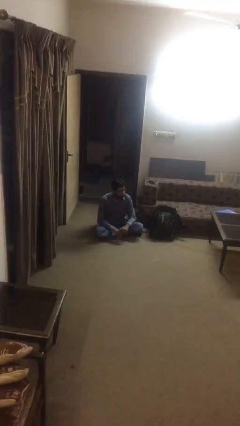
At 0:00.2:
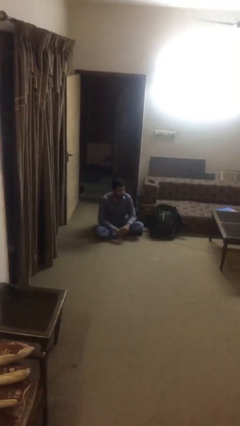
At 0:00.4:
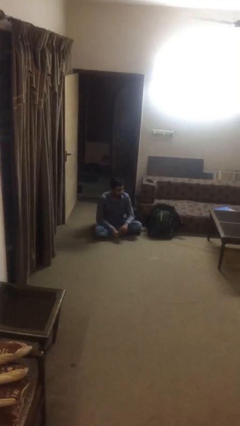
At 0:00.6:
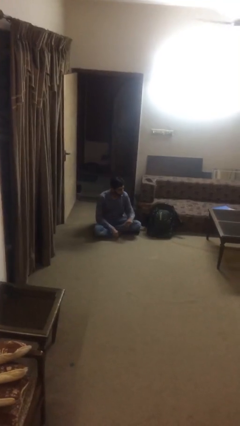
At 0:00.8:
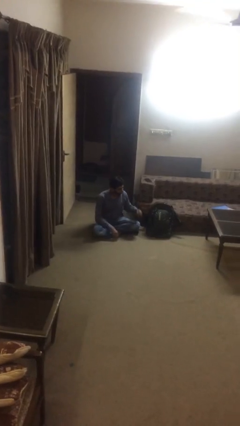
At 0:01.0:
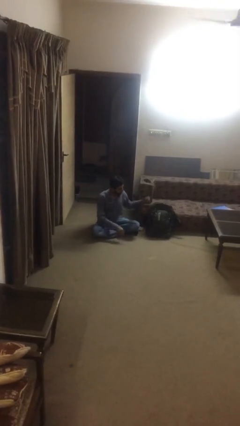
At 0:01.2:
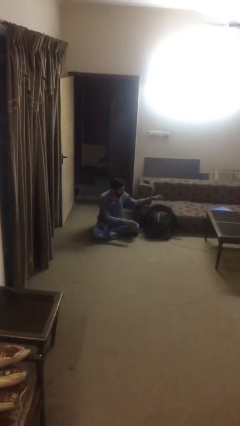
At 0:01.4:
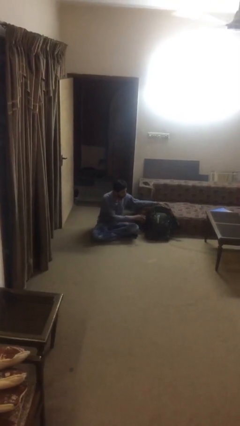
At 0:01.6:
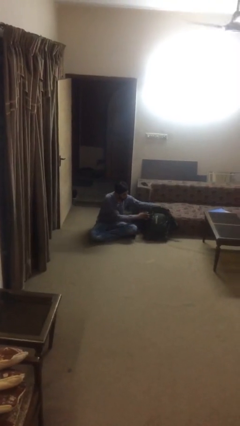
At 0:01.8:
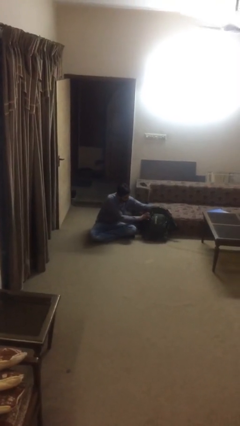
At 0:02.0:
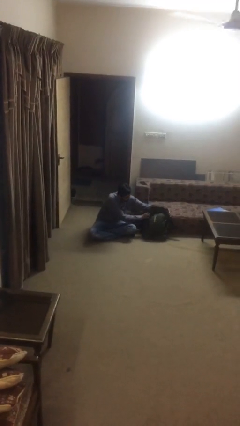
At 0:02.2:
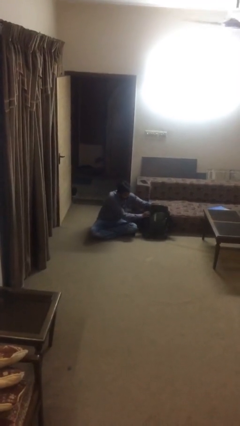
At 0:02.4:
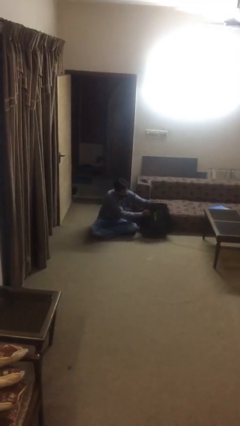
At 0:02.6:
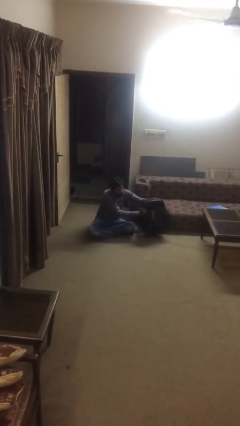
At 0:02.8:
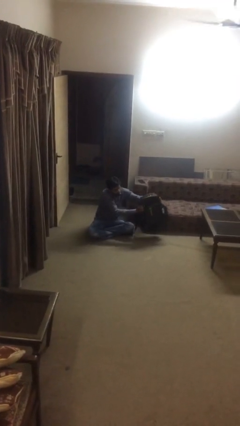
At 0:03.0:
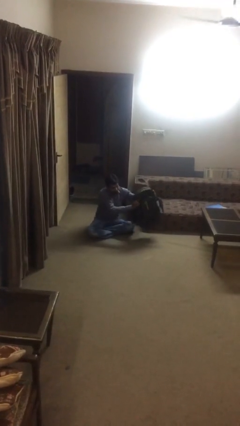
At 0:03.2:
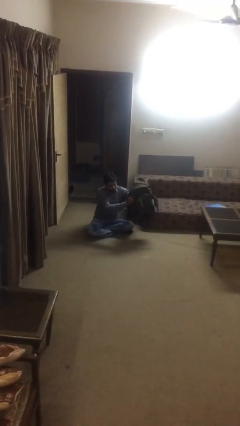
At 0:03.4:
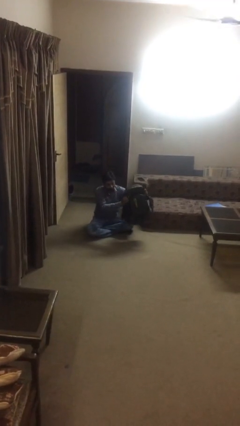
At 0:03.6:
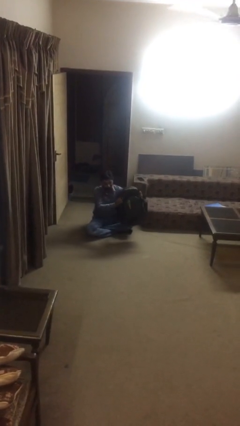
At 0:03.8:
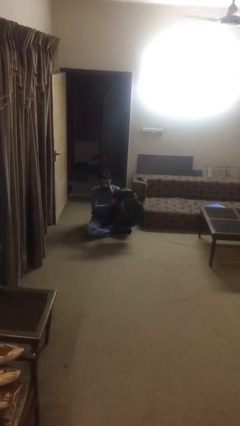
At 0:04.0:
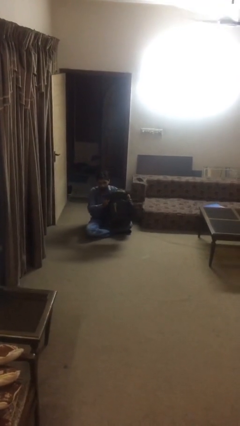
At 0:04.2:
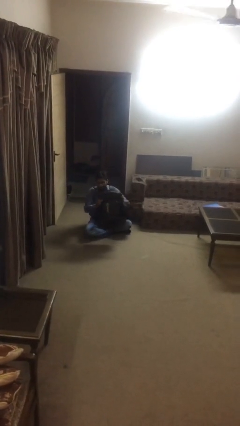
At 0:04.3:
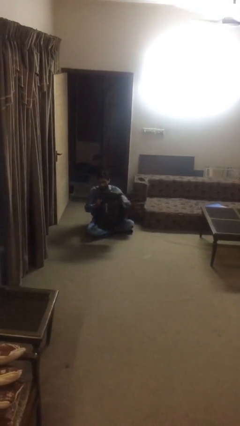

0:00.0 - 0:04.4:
person picks up object from floor

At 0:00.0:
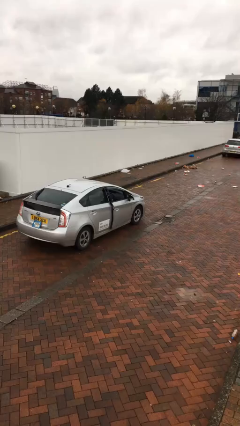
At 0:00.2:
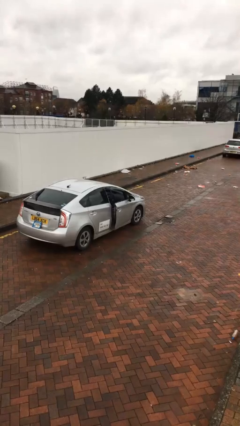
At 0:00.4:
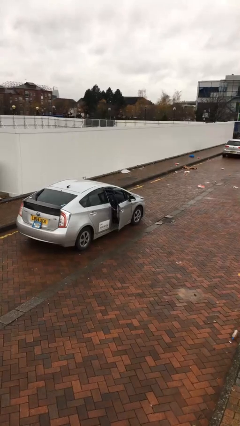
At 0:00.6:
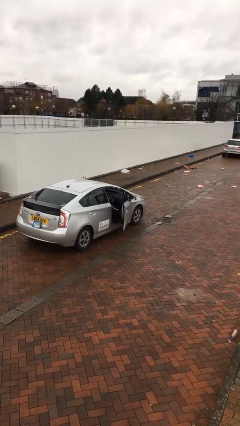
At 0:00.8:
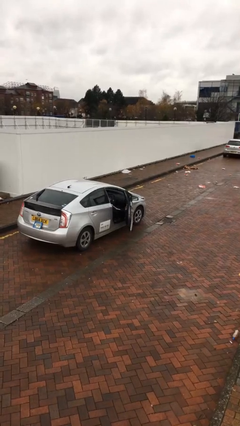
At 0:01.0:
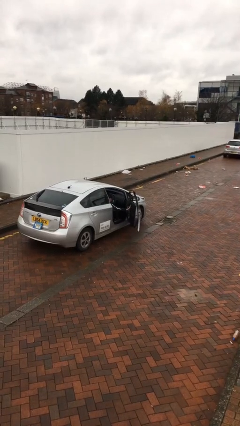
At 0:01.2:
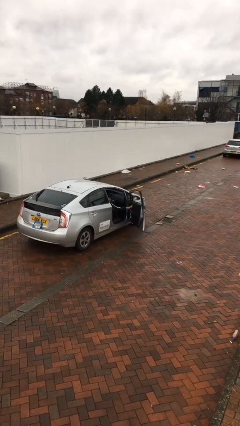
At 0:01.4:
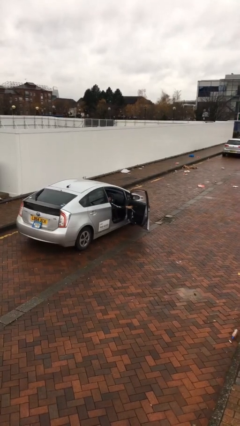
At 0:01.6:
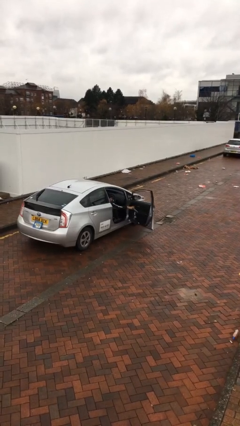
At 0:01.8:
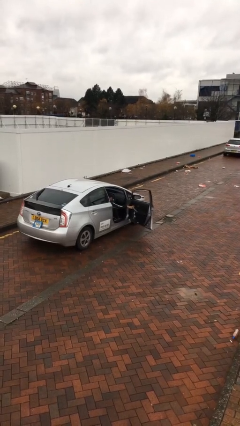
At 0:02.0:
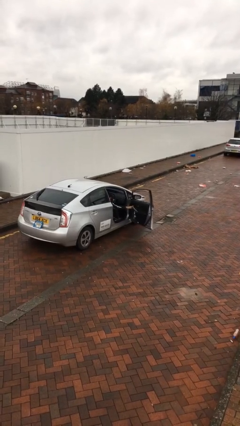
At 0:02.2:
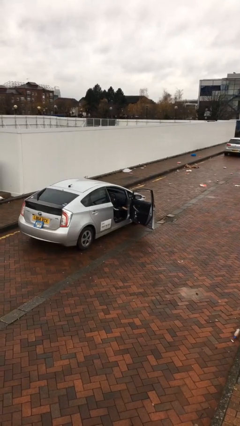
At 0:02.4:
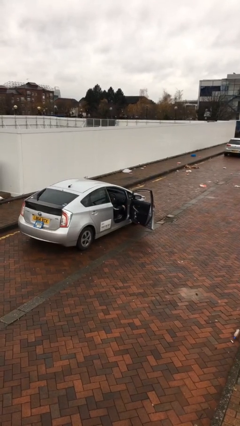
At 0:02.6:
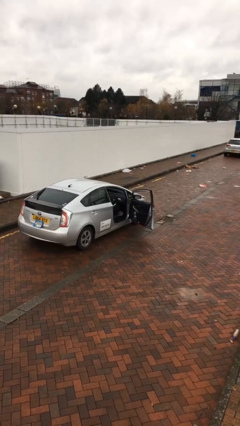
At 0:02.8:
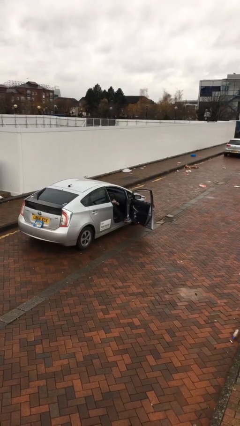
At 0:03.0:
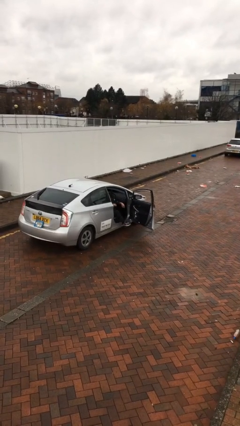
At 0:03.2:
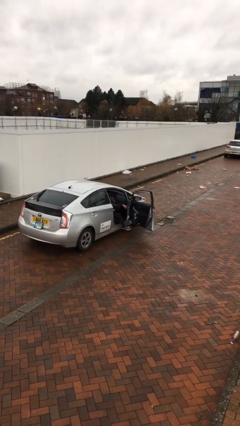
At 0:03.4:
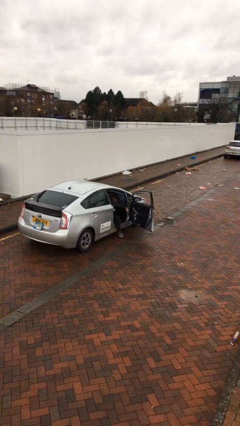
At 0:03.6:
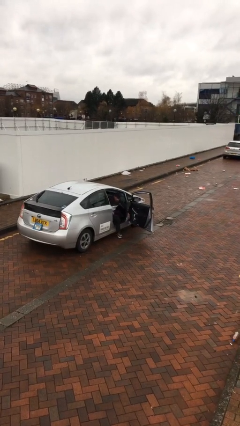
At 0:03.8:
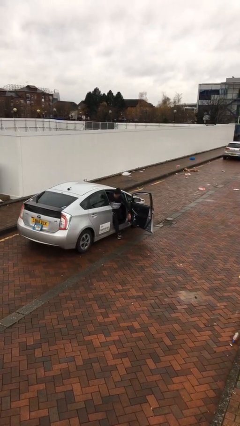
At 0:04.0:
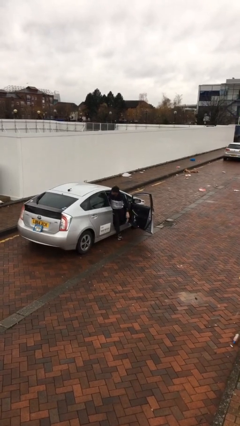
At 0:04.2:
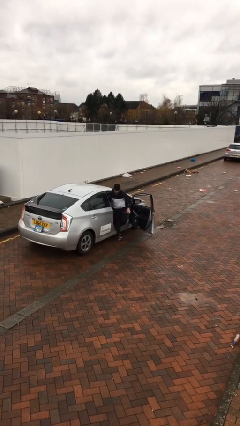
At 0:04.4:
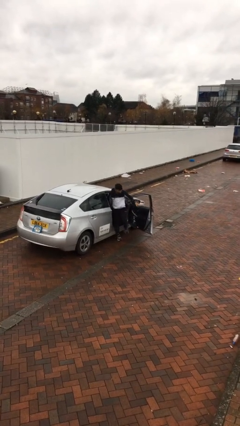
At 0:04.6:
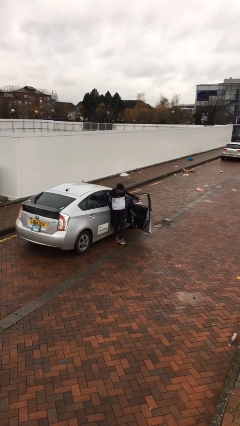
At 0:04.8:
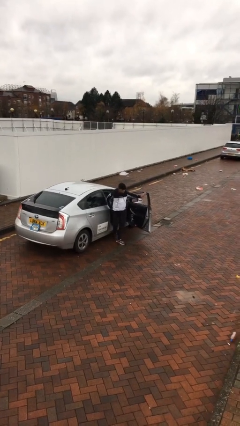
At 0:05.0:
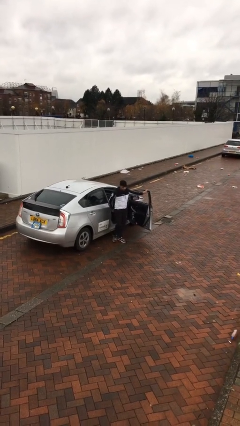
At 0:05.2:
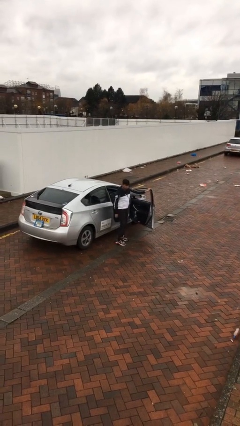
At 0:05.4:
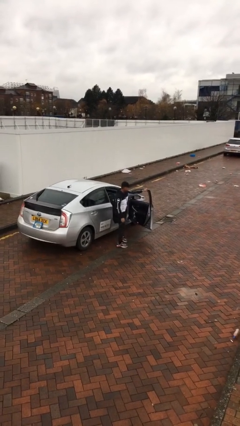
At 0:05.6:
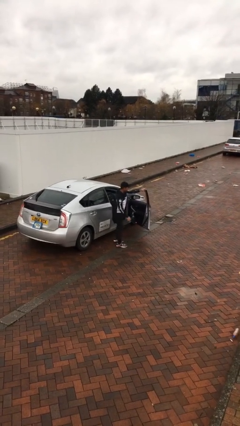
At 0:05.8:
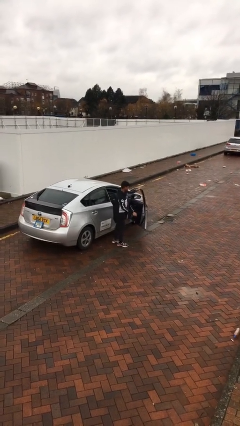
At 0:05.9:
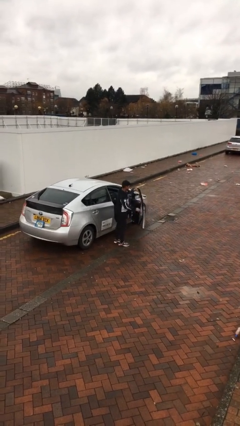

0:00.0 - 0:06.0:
person opens car door

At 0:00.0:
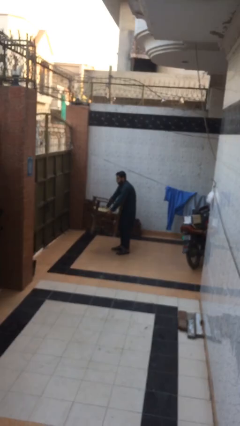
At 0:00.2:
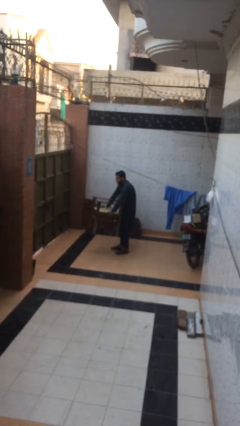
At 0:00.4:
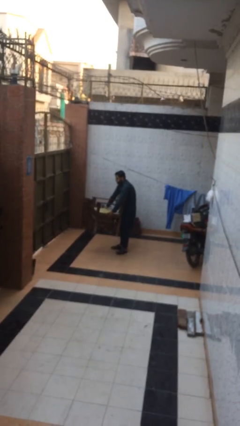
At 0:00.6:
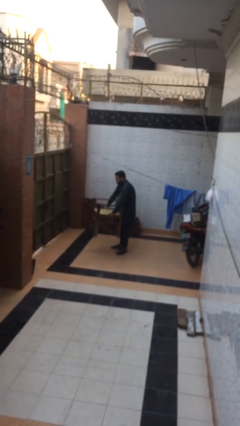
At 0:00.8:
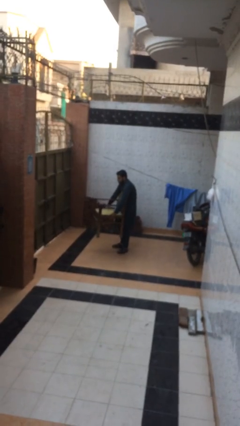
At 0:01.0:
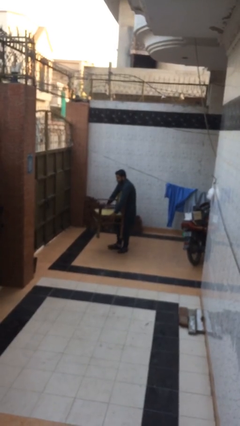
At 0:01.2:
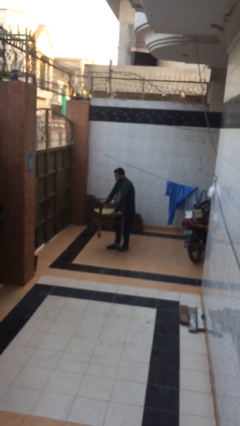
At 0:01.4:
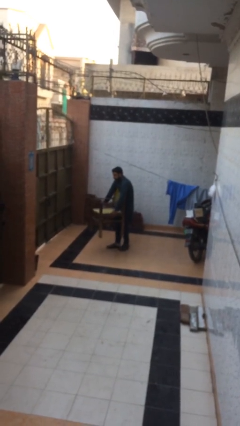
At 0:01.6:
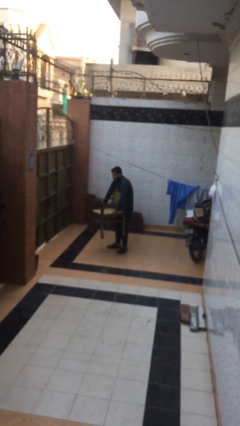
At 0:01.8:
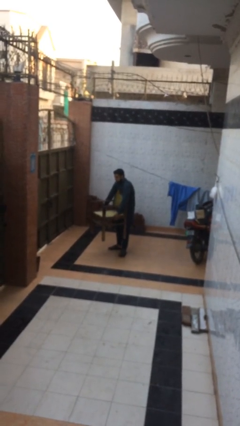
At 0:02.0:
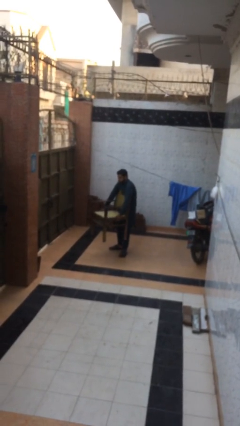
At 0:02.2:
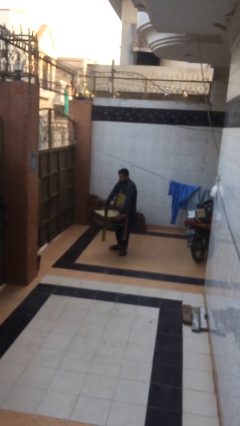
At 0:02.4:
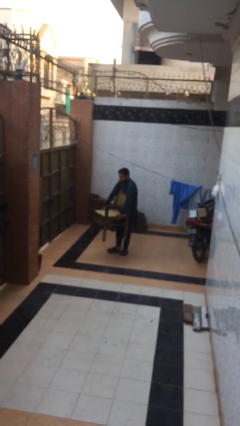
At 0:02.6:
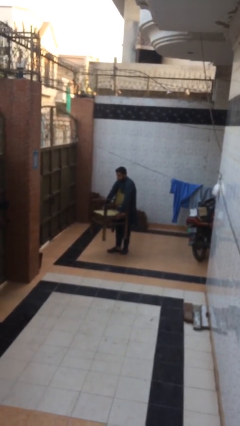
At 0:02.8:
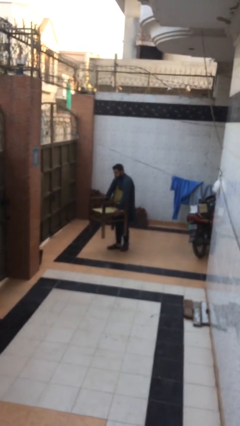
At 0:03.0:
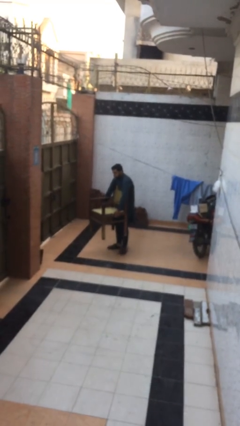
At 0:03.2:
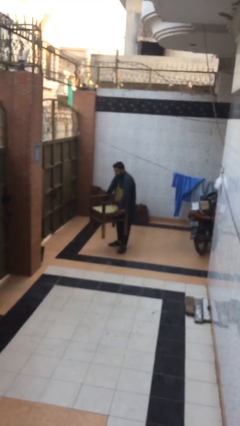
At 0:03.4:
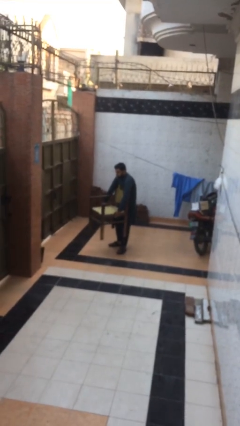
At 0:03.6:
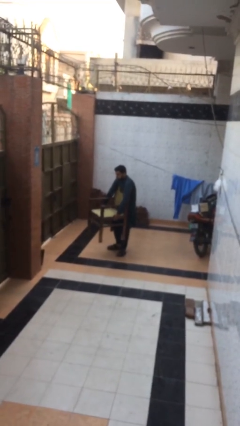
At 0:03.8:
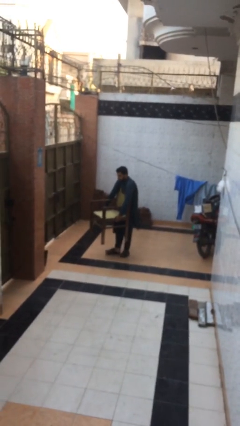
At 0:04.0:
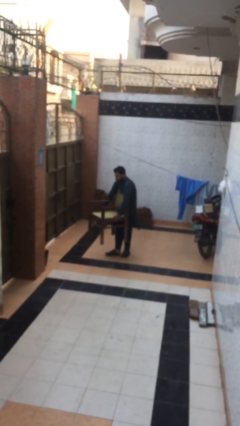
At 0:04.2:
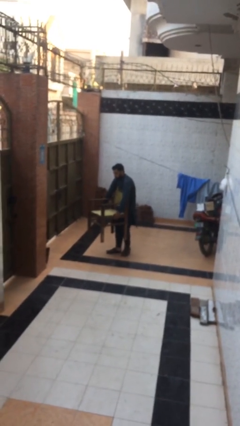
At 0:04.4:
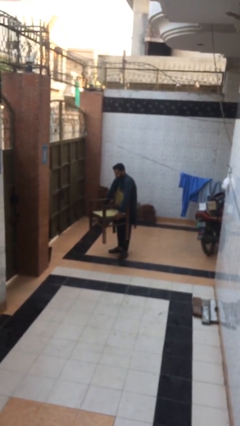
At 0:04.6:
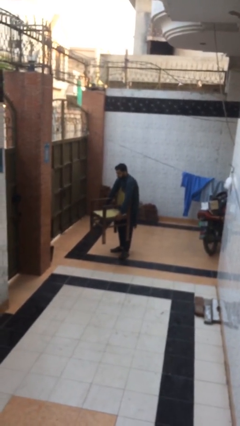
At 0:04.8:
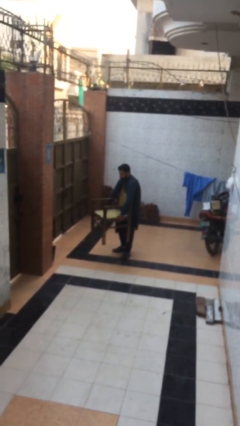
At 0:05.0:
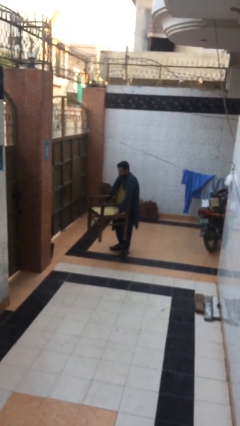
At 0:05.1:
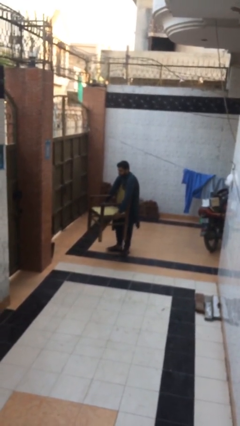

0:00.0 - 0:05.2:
person carries heavy object

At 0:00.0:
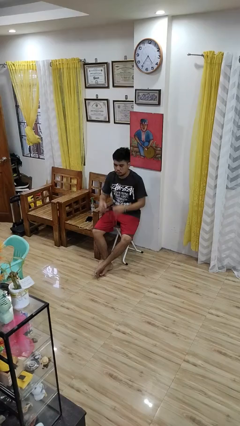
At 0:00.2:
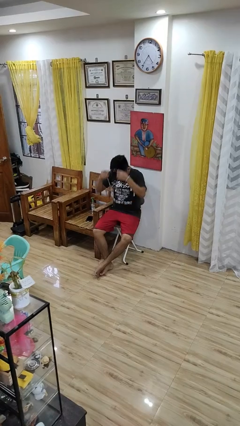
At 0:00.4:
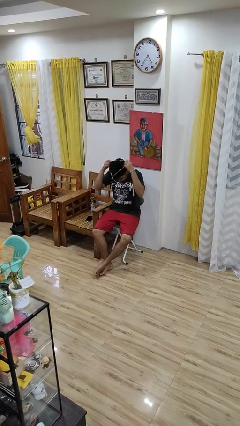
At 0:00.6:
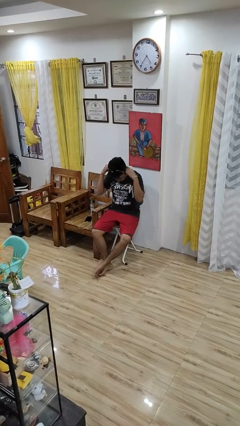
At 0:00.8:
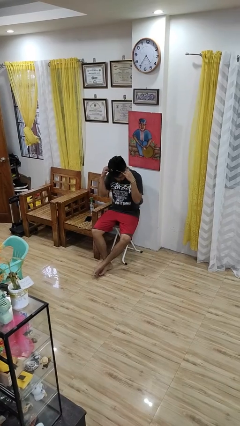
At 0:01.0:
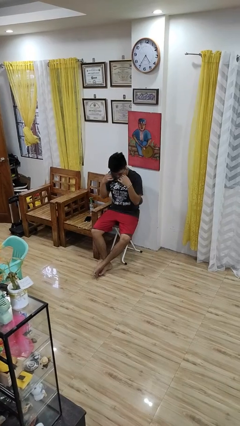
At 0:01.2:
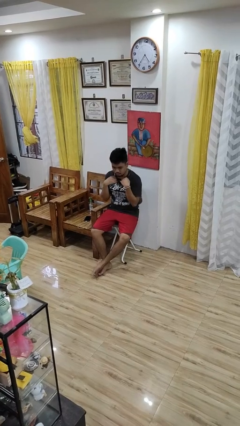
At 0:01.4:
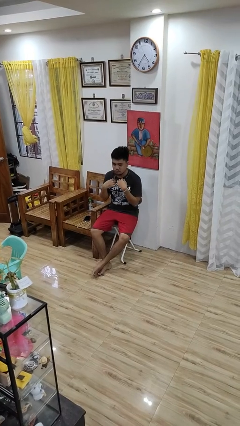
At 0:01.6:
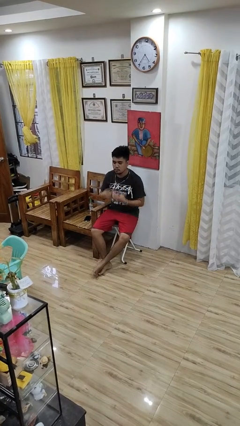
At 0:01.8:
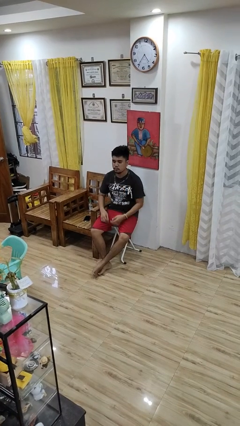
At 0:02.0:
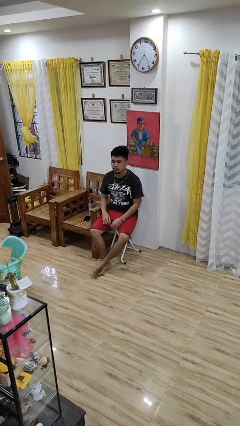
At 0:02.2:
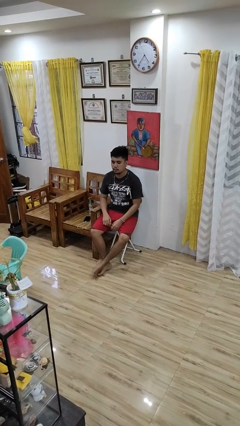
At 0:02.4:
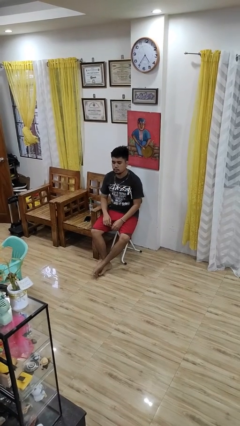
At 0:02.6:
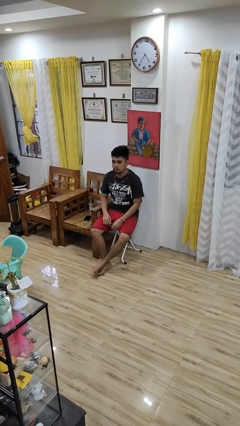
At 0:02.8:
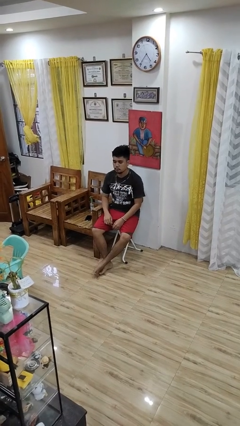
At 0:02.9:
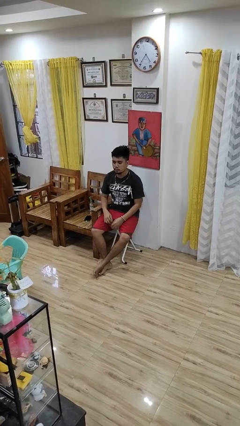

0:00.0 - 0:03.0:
person puts on necklace
